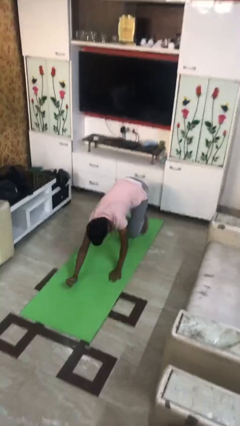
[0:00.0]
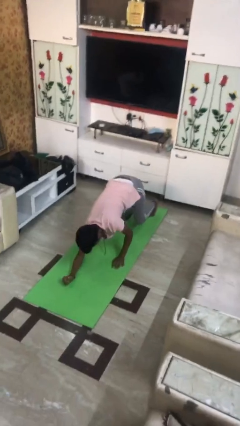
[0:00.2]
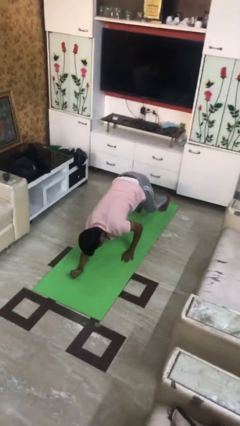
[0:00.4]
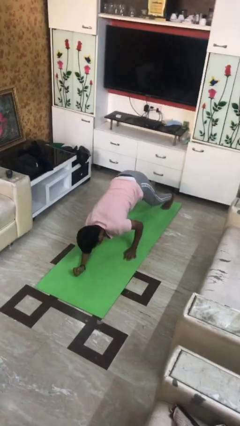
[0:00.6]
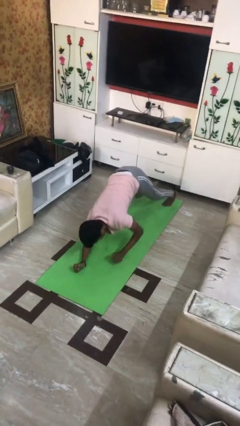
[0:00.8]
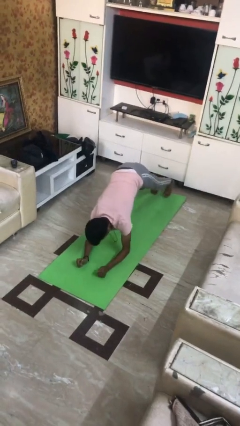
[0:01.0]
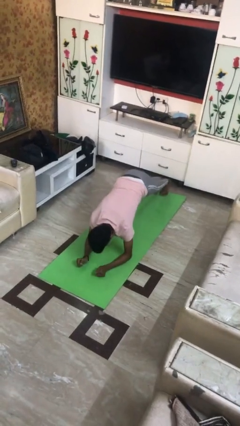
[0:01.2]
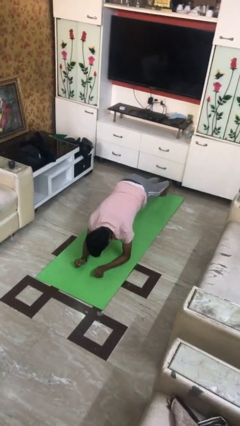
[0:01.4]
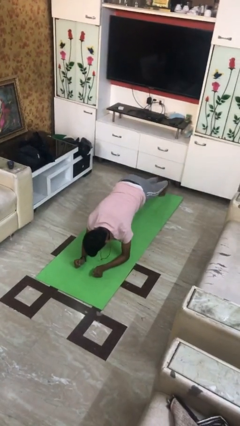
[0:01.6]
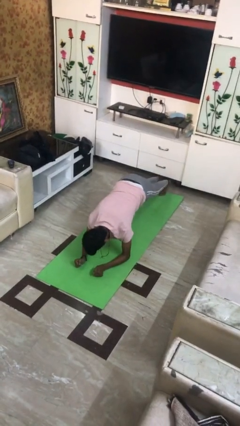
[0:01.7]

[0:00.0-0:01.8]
person exercises with plank

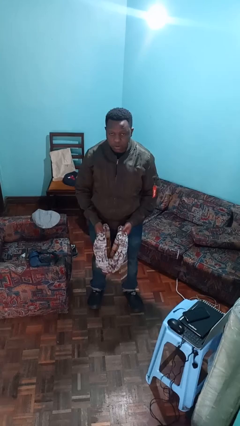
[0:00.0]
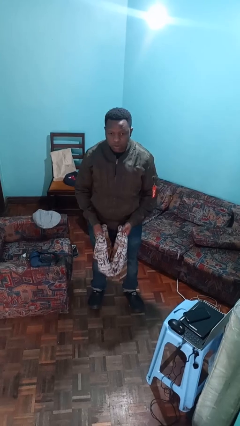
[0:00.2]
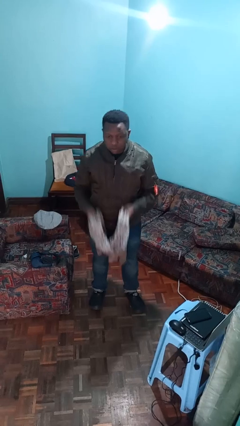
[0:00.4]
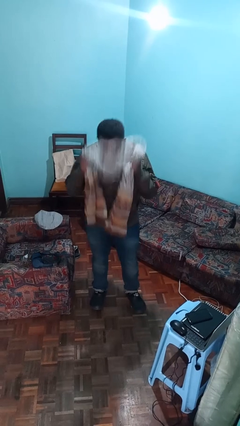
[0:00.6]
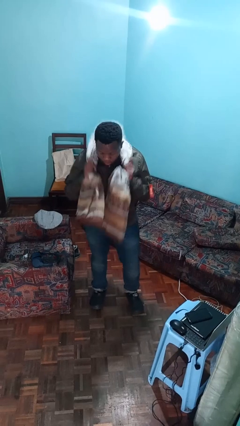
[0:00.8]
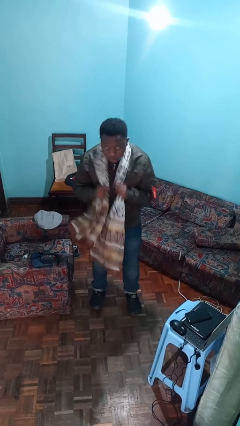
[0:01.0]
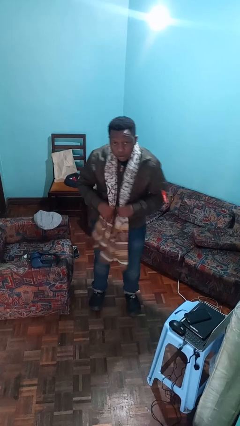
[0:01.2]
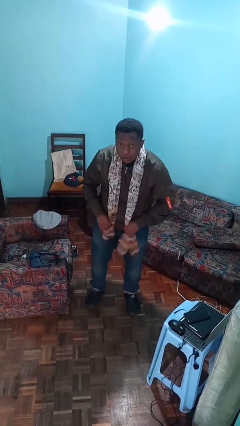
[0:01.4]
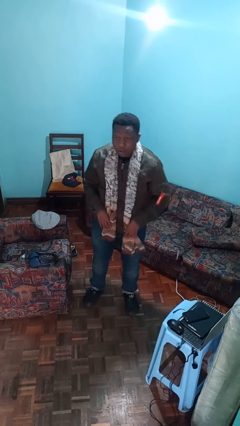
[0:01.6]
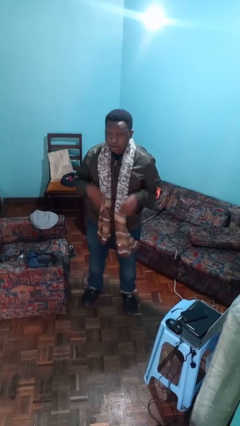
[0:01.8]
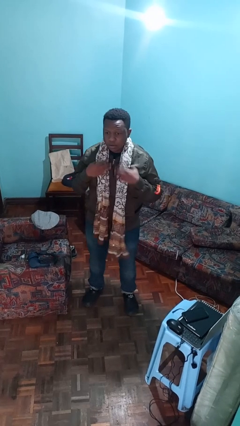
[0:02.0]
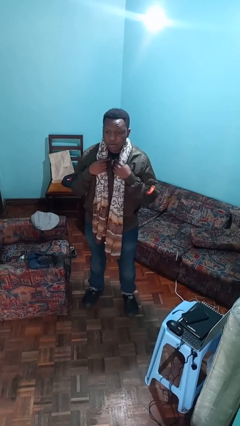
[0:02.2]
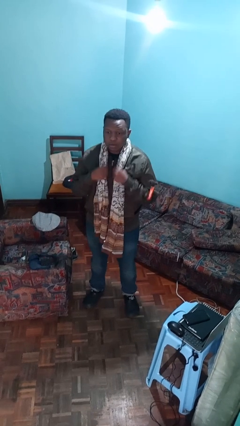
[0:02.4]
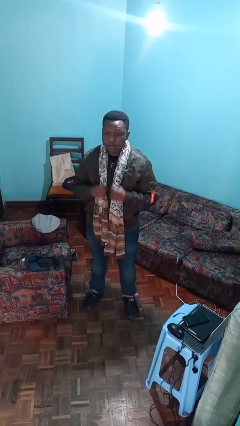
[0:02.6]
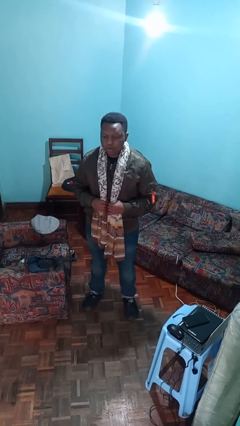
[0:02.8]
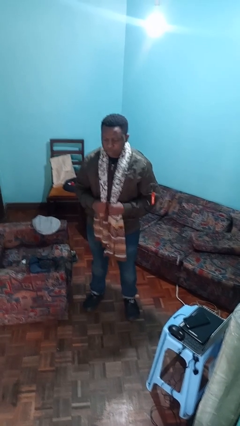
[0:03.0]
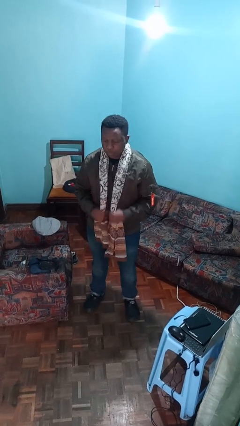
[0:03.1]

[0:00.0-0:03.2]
person puts on scarf

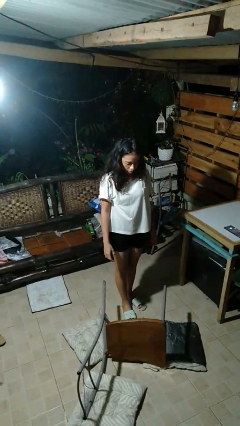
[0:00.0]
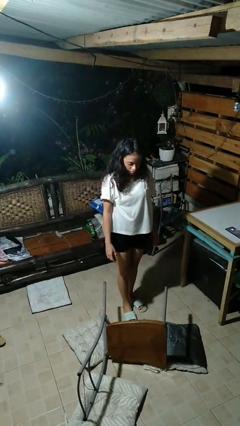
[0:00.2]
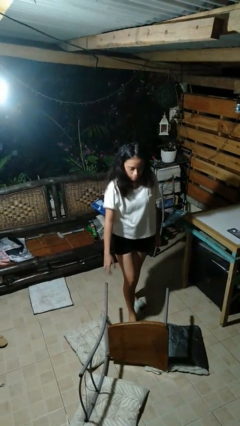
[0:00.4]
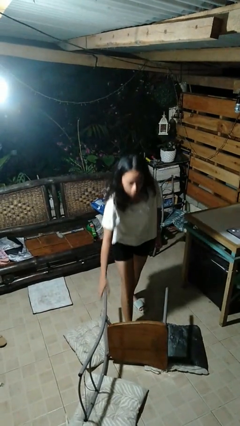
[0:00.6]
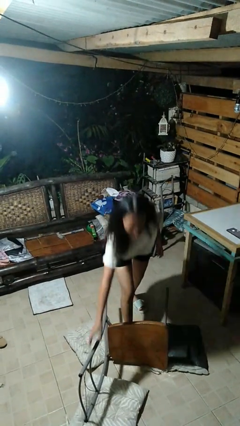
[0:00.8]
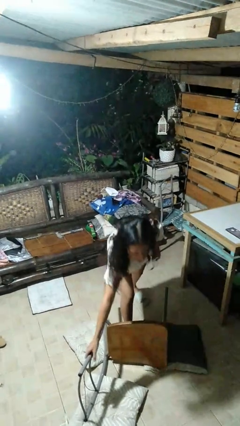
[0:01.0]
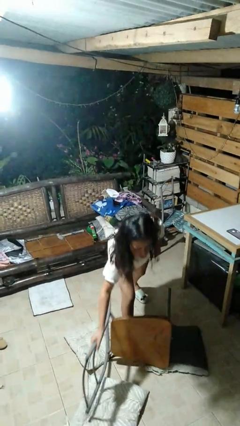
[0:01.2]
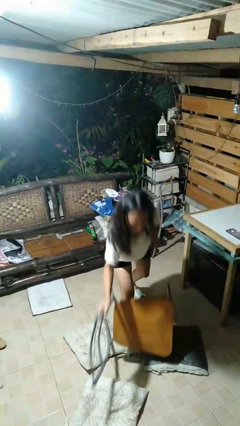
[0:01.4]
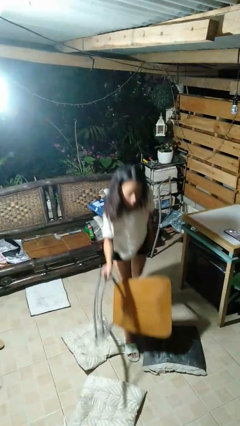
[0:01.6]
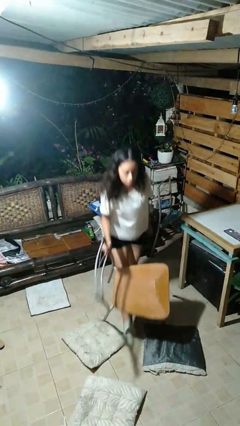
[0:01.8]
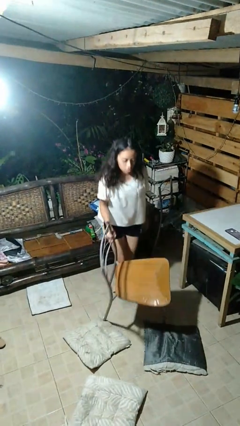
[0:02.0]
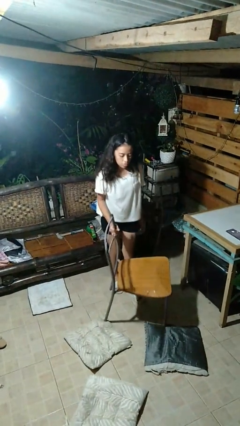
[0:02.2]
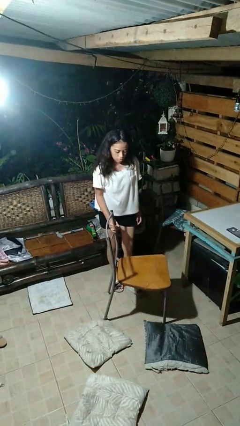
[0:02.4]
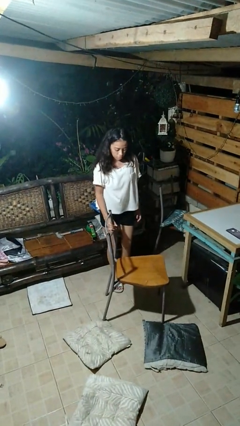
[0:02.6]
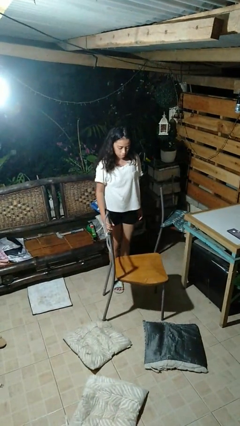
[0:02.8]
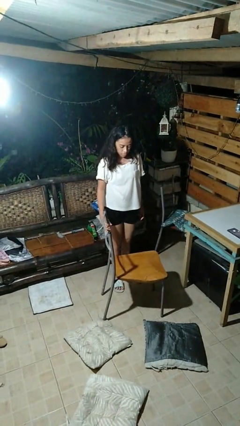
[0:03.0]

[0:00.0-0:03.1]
person sets upright furniture

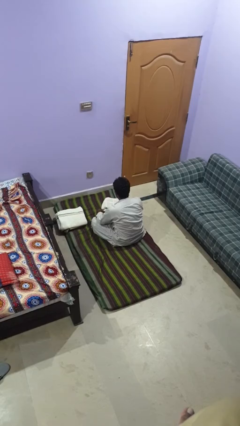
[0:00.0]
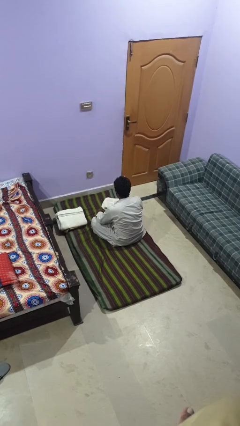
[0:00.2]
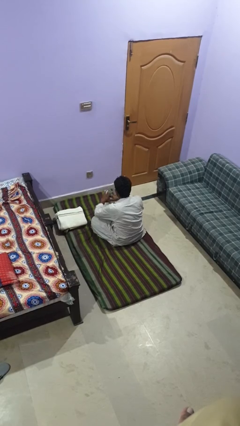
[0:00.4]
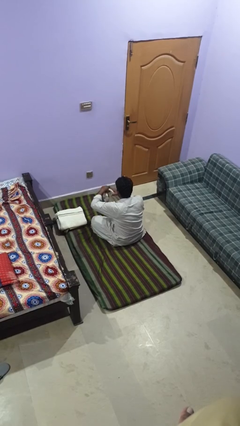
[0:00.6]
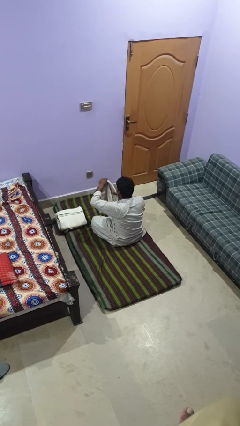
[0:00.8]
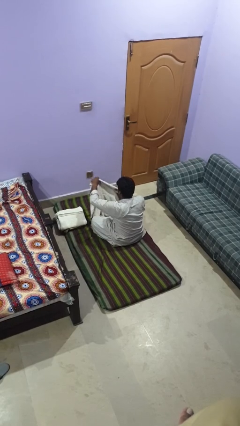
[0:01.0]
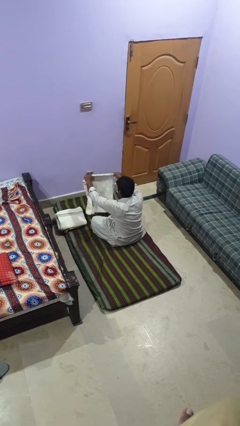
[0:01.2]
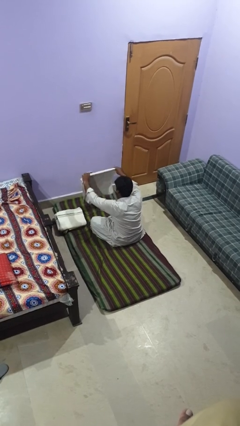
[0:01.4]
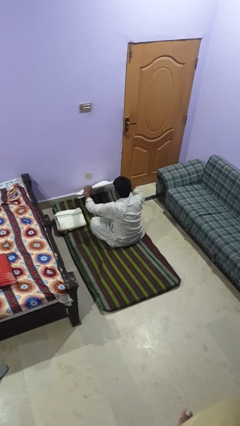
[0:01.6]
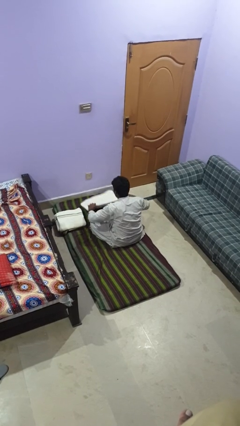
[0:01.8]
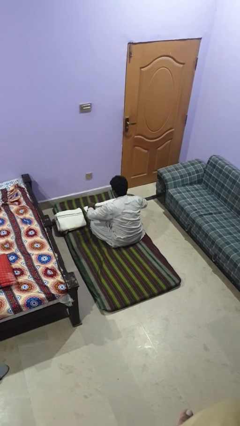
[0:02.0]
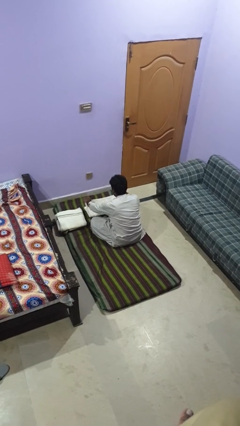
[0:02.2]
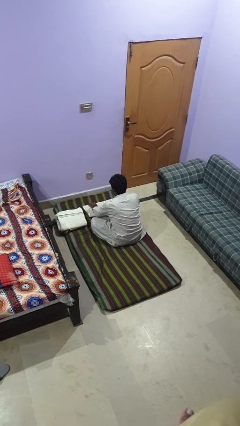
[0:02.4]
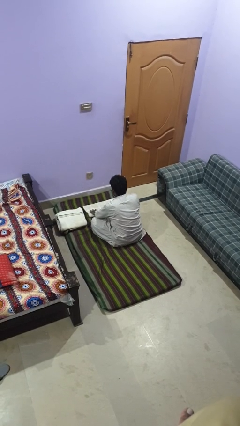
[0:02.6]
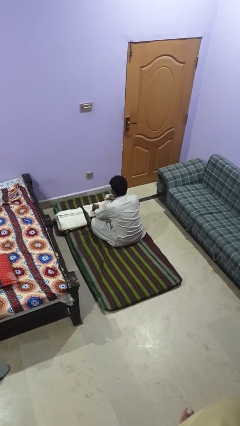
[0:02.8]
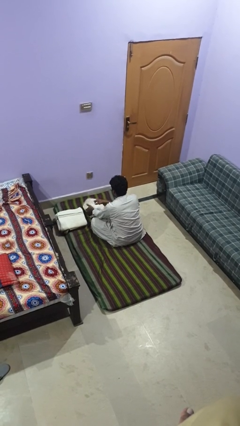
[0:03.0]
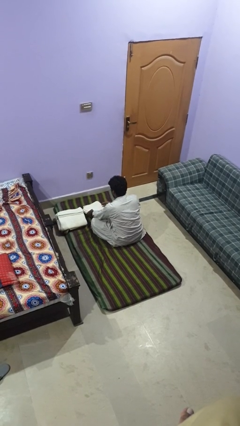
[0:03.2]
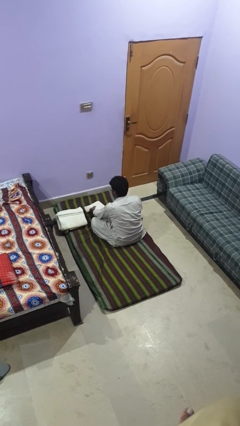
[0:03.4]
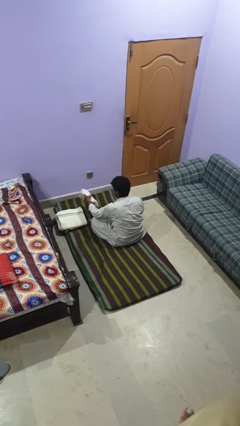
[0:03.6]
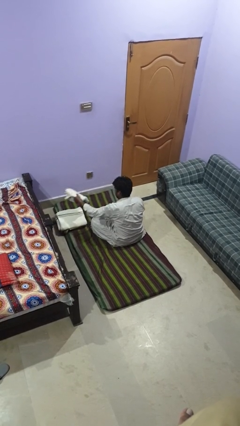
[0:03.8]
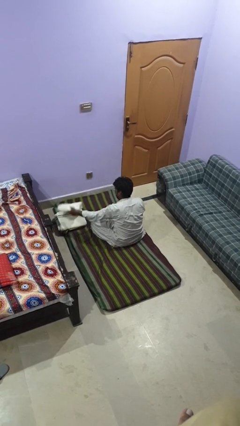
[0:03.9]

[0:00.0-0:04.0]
person folds towel

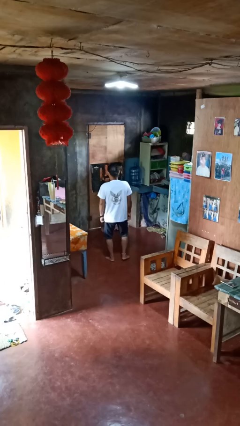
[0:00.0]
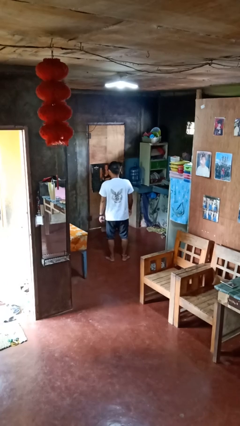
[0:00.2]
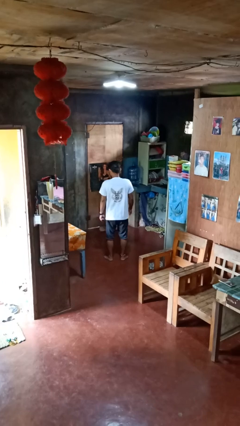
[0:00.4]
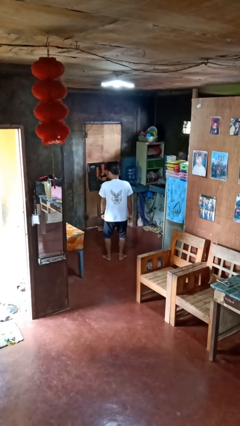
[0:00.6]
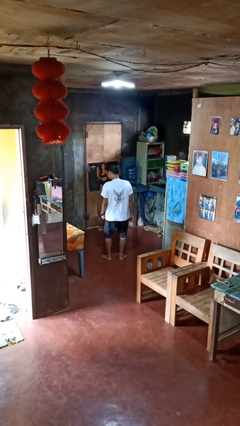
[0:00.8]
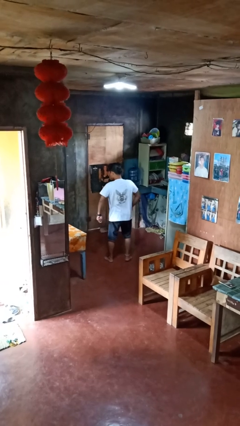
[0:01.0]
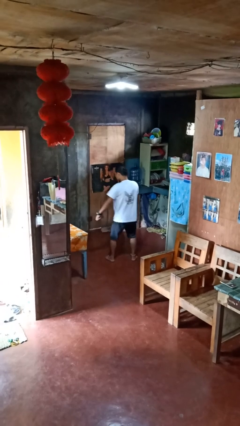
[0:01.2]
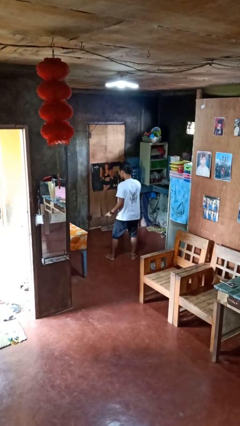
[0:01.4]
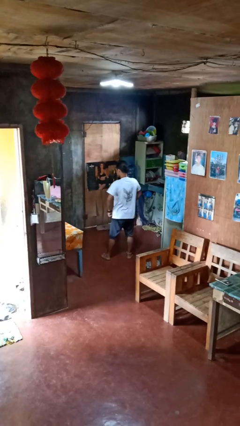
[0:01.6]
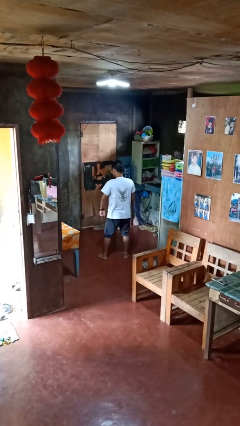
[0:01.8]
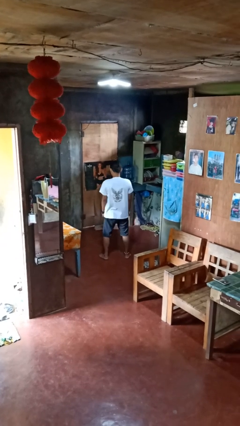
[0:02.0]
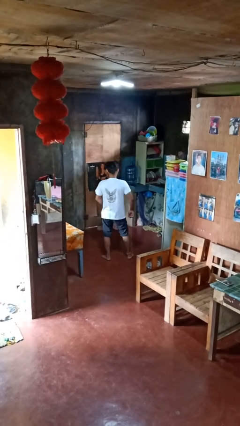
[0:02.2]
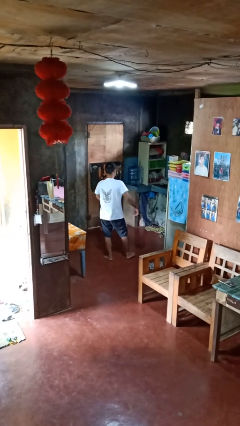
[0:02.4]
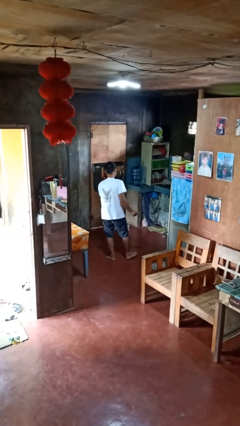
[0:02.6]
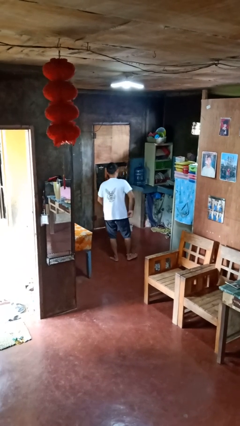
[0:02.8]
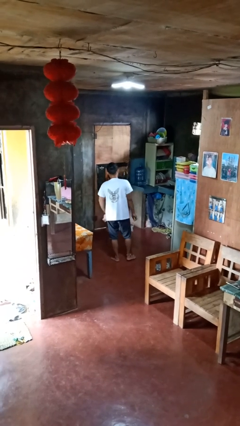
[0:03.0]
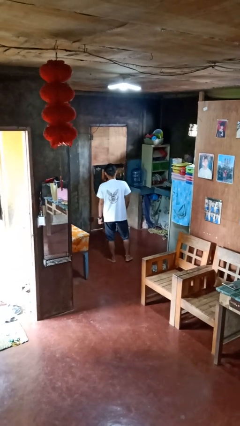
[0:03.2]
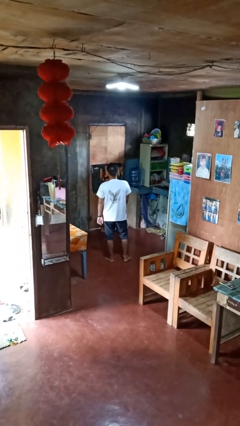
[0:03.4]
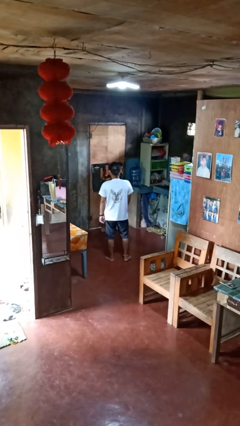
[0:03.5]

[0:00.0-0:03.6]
person dances in place

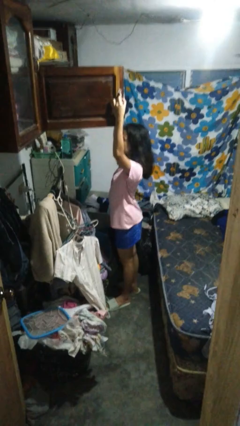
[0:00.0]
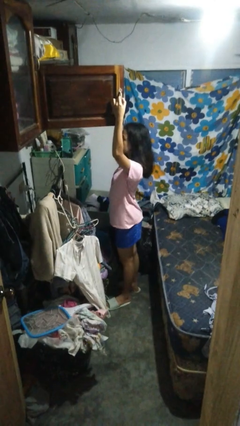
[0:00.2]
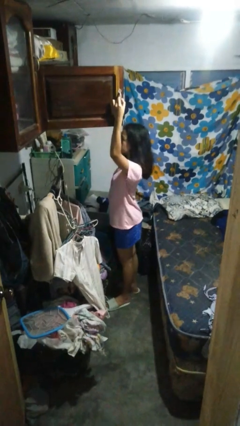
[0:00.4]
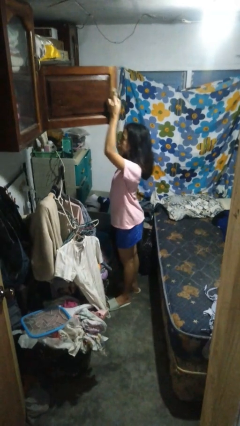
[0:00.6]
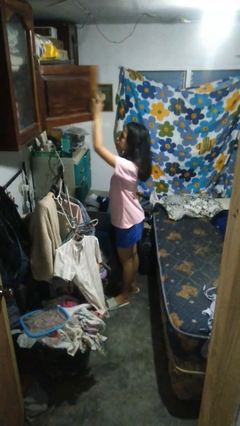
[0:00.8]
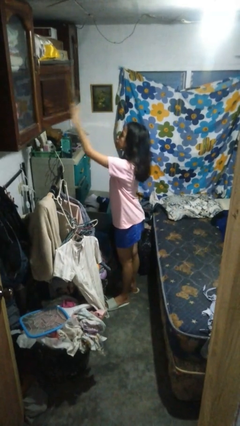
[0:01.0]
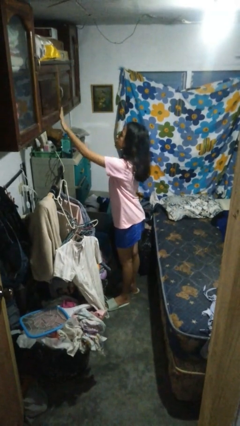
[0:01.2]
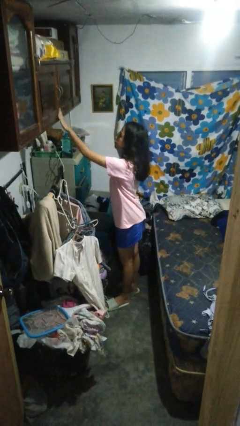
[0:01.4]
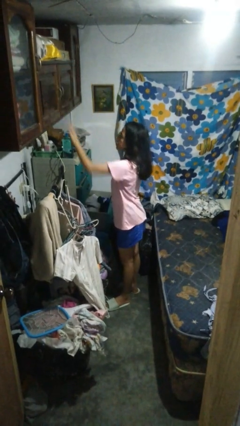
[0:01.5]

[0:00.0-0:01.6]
person closes closet door

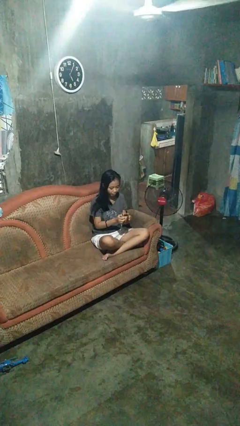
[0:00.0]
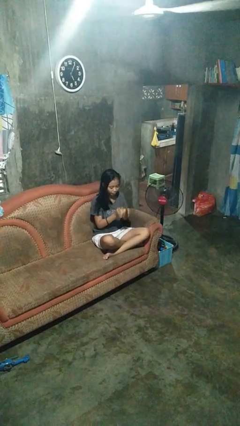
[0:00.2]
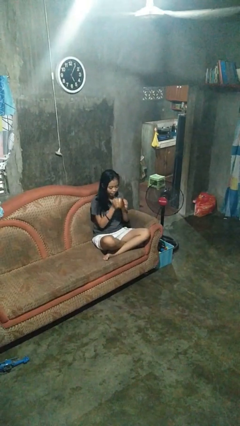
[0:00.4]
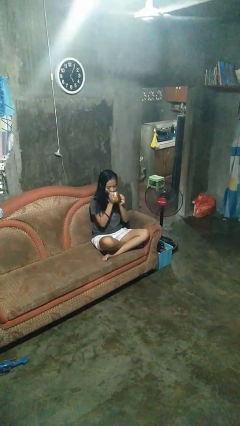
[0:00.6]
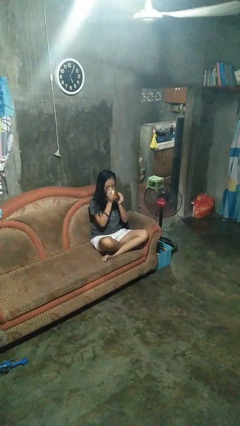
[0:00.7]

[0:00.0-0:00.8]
person drinks from mug
